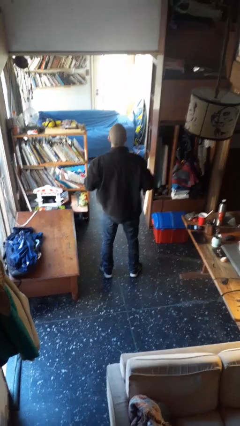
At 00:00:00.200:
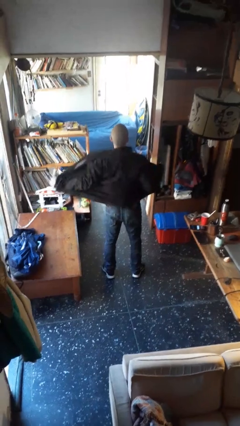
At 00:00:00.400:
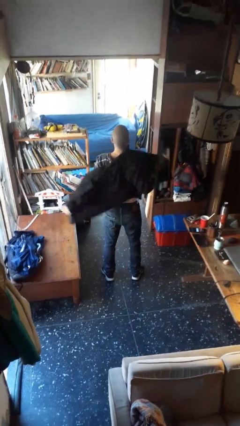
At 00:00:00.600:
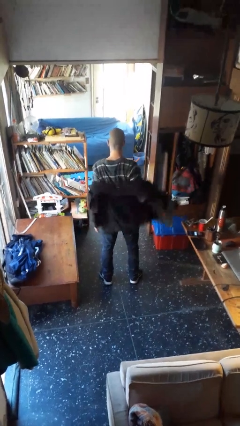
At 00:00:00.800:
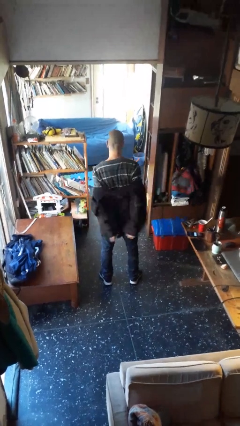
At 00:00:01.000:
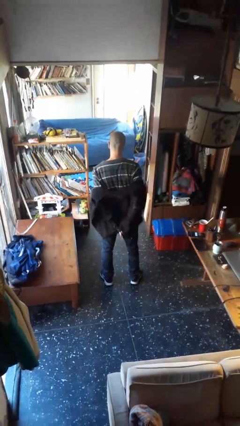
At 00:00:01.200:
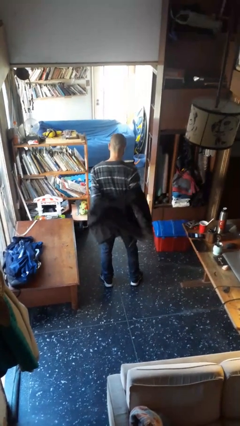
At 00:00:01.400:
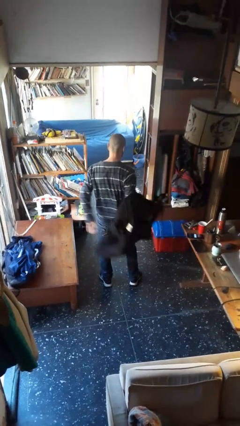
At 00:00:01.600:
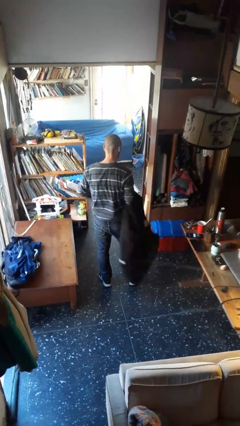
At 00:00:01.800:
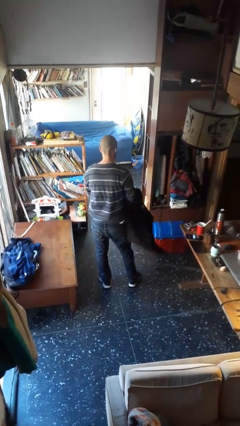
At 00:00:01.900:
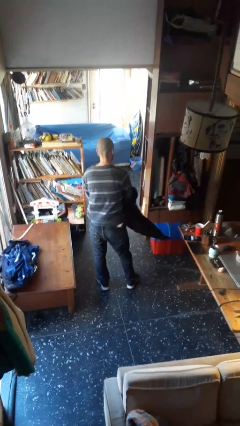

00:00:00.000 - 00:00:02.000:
person takes off jacket

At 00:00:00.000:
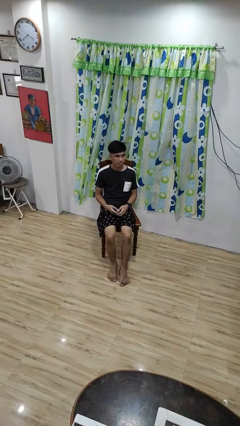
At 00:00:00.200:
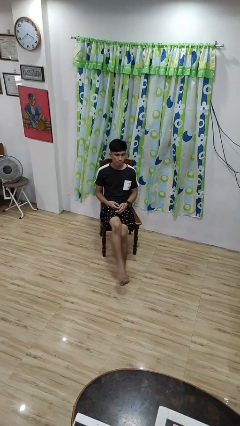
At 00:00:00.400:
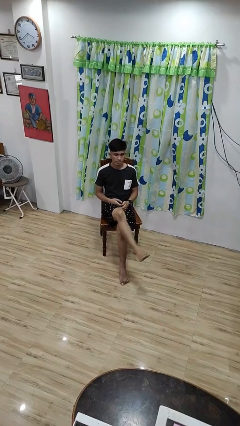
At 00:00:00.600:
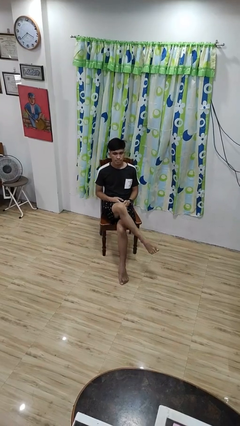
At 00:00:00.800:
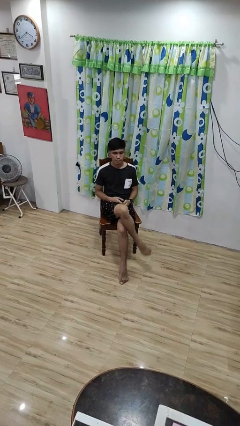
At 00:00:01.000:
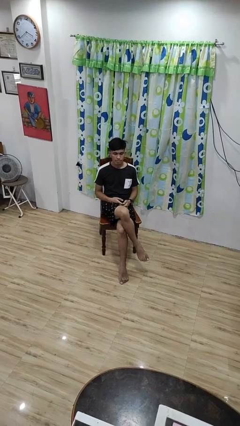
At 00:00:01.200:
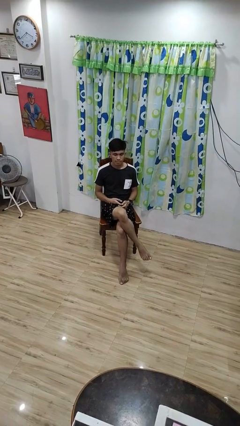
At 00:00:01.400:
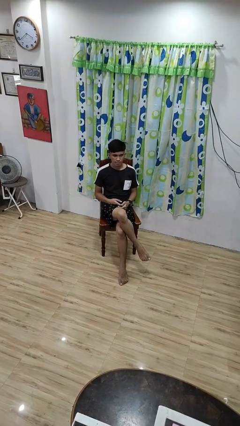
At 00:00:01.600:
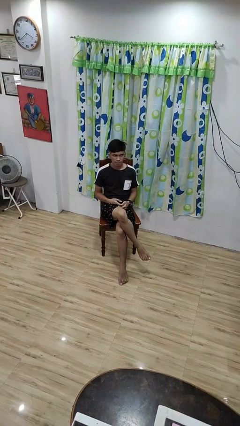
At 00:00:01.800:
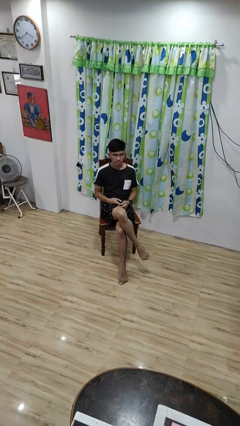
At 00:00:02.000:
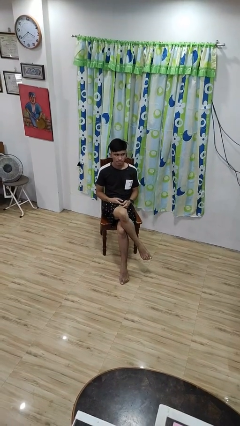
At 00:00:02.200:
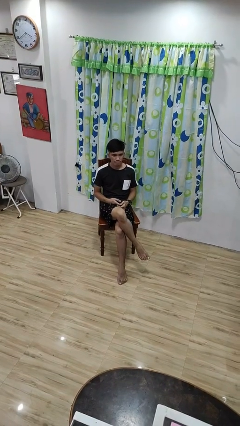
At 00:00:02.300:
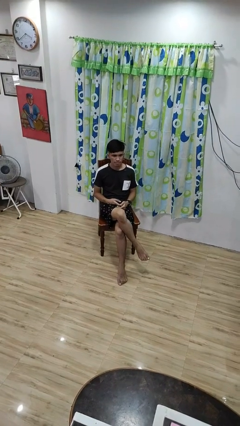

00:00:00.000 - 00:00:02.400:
person crosses legs

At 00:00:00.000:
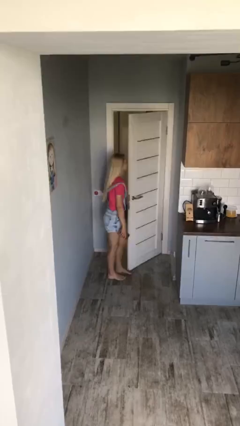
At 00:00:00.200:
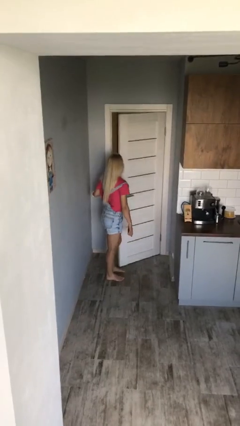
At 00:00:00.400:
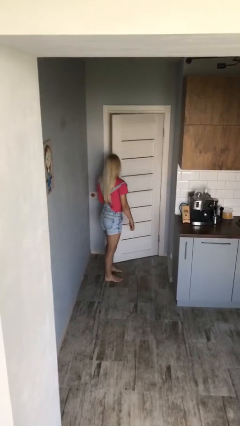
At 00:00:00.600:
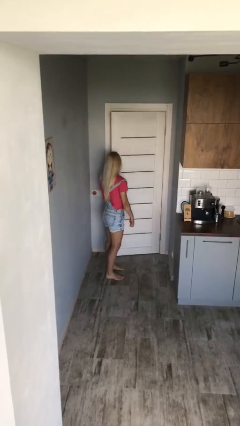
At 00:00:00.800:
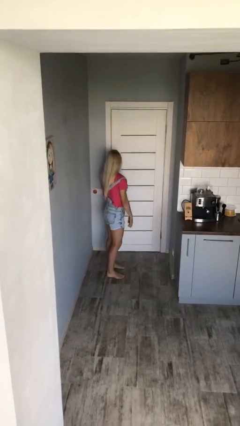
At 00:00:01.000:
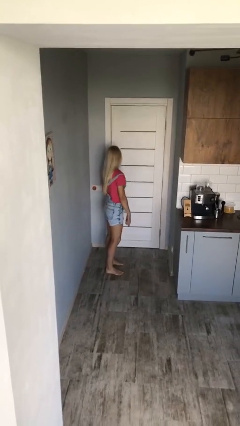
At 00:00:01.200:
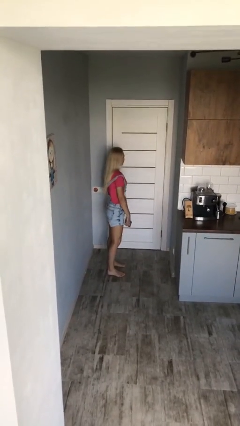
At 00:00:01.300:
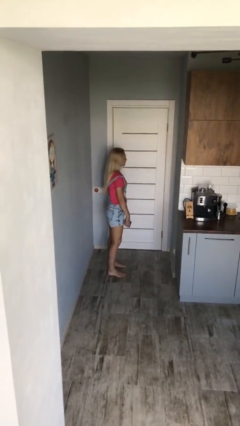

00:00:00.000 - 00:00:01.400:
person closes facility door

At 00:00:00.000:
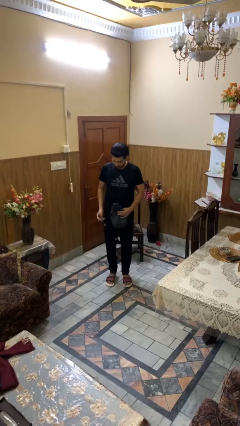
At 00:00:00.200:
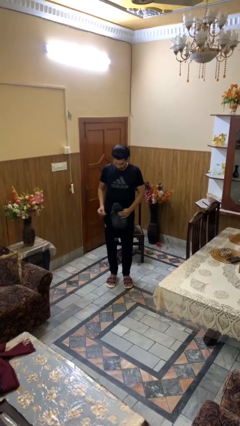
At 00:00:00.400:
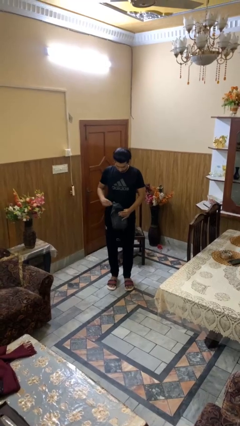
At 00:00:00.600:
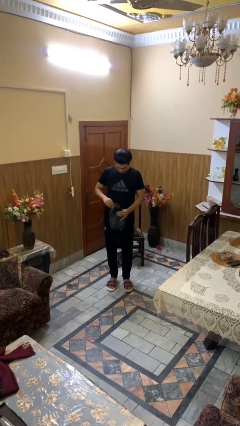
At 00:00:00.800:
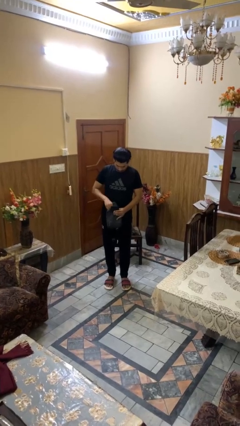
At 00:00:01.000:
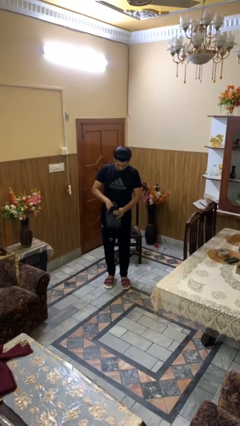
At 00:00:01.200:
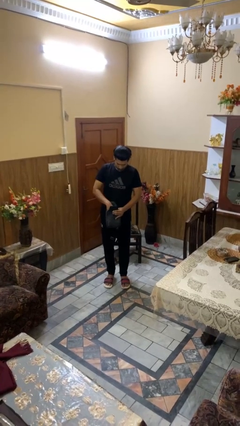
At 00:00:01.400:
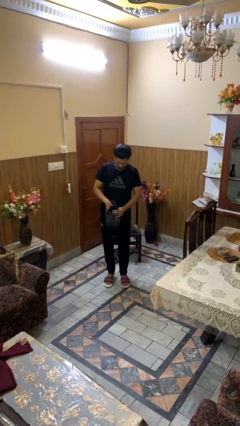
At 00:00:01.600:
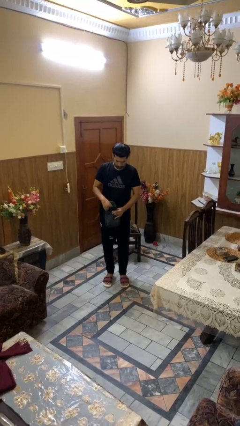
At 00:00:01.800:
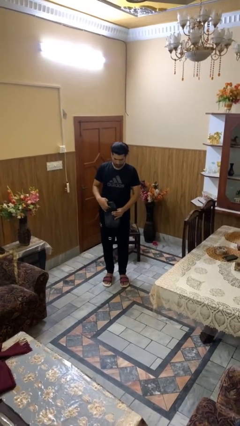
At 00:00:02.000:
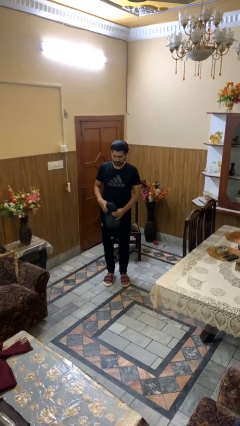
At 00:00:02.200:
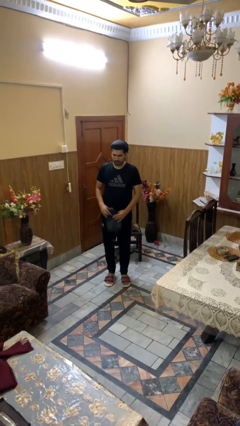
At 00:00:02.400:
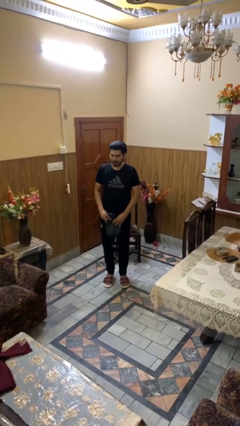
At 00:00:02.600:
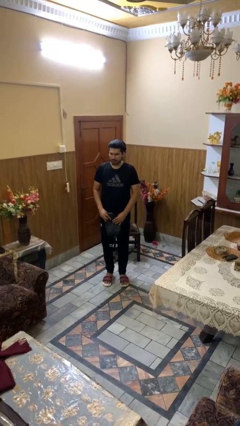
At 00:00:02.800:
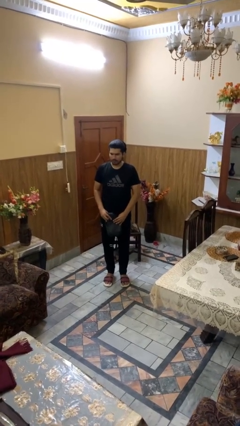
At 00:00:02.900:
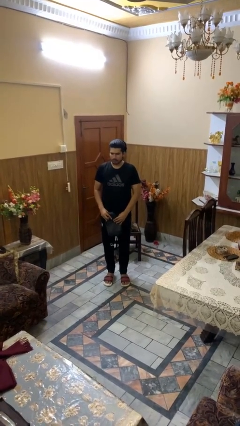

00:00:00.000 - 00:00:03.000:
person puts object into purse

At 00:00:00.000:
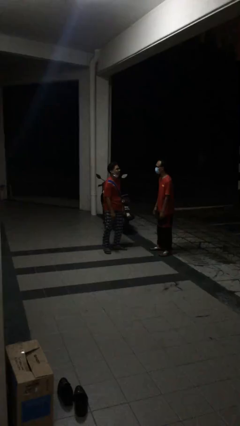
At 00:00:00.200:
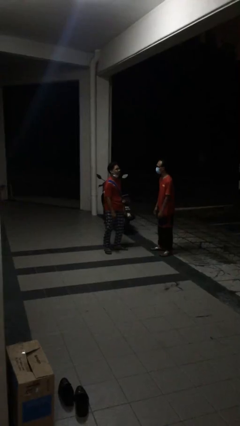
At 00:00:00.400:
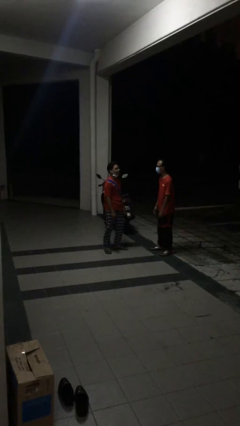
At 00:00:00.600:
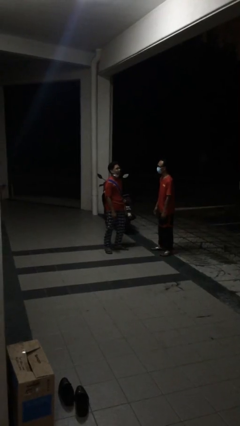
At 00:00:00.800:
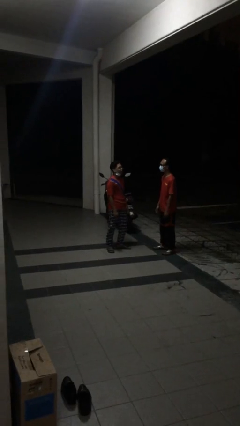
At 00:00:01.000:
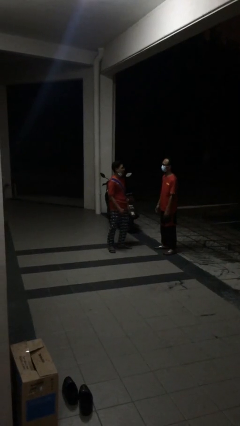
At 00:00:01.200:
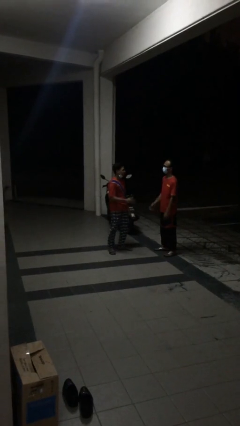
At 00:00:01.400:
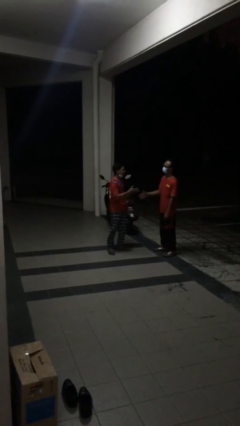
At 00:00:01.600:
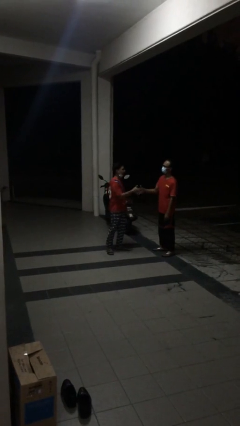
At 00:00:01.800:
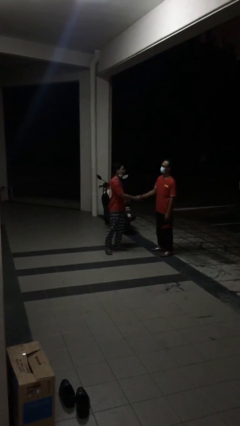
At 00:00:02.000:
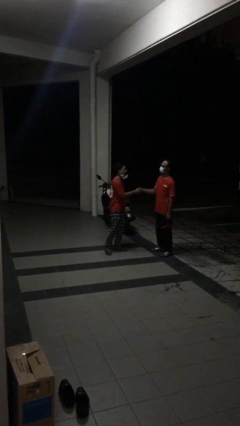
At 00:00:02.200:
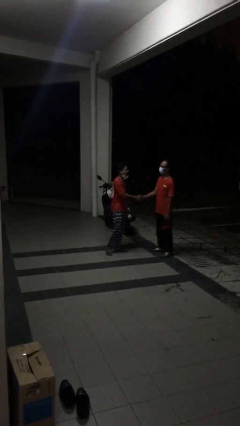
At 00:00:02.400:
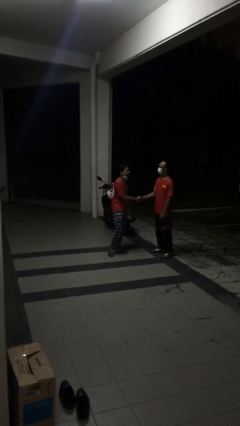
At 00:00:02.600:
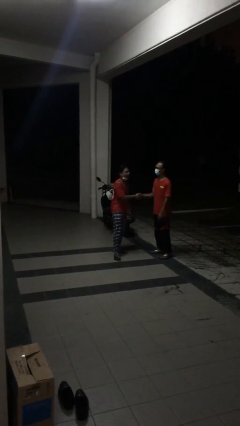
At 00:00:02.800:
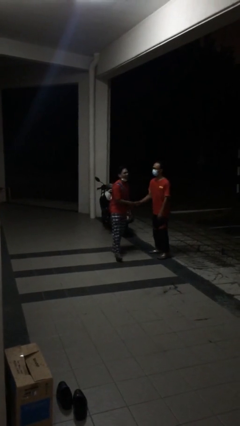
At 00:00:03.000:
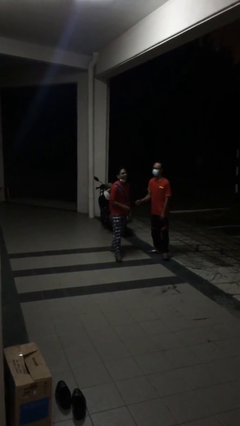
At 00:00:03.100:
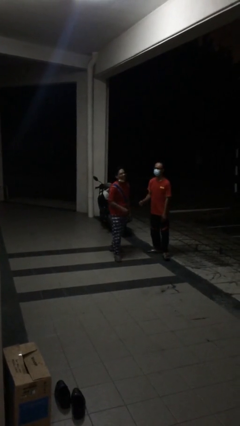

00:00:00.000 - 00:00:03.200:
person shakes hand

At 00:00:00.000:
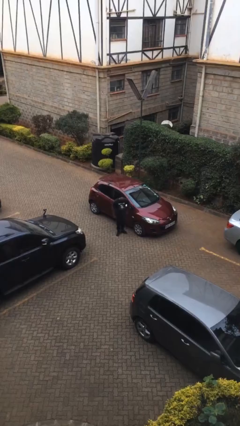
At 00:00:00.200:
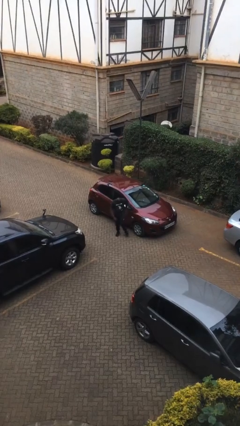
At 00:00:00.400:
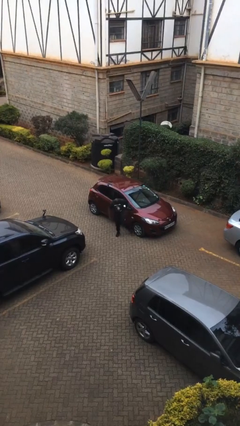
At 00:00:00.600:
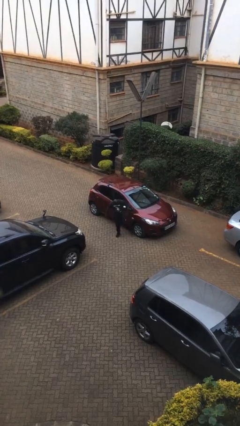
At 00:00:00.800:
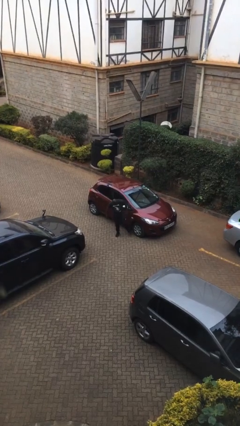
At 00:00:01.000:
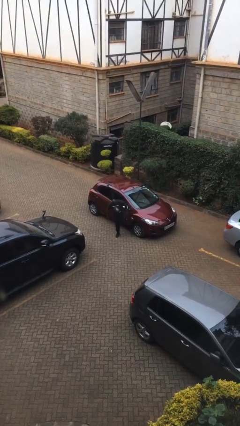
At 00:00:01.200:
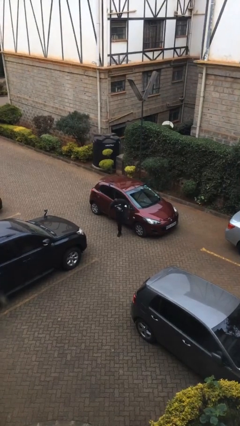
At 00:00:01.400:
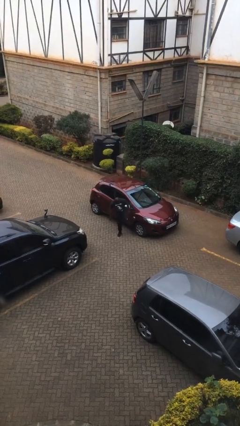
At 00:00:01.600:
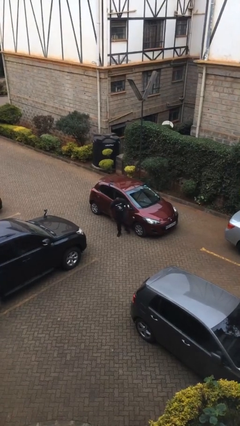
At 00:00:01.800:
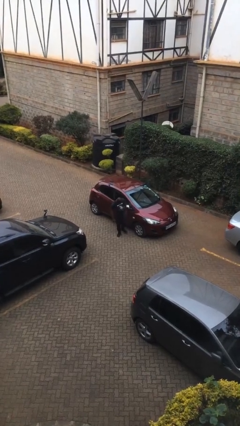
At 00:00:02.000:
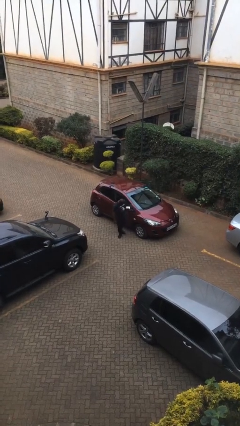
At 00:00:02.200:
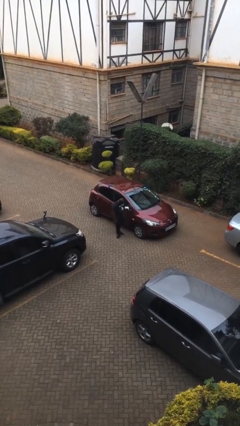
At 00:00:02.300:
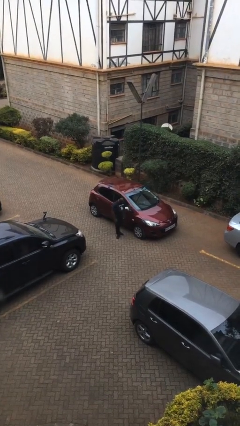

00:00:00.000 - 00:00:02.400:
person kicks car tires

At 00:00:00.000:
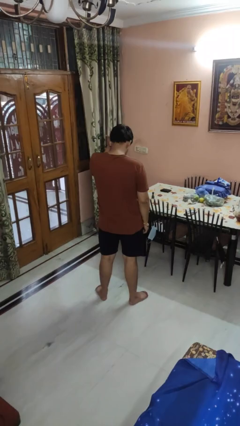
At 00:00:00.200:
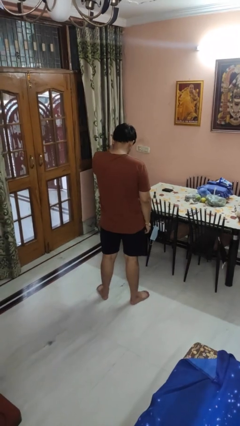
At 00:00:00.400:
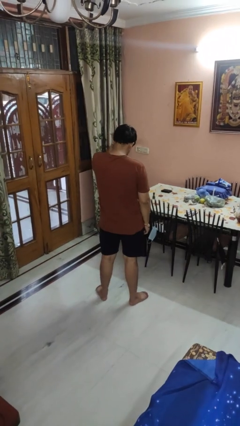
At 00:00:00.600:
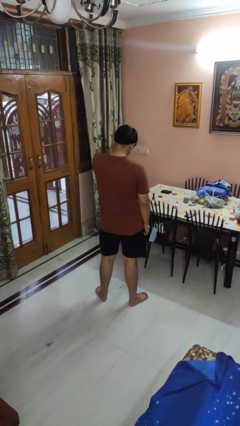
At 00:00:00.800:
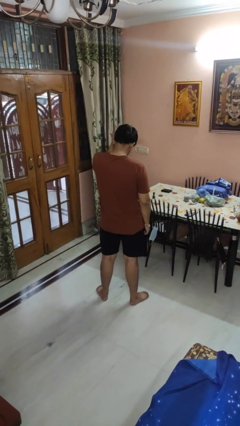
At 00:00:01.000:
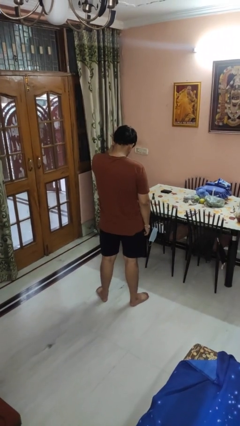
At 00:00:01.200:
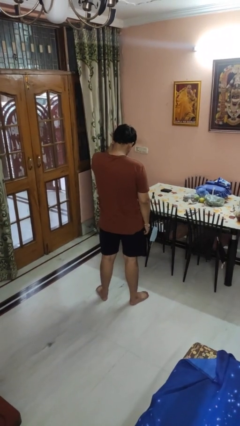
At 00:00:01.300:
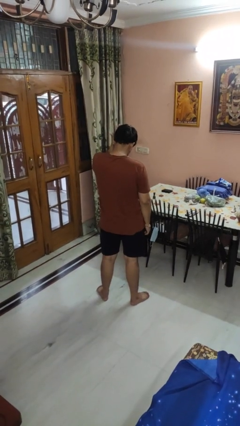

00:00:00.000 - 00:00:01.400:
person pats head

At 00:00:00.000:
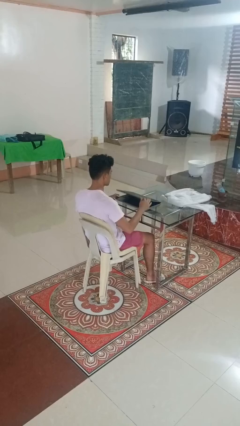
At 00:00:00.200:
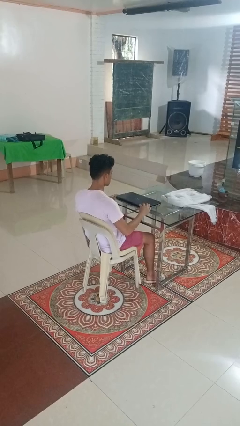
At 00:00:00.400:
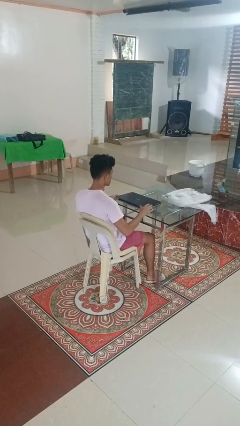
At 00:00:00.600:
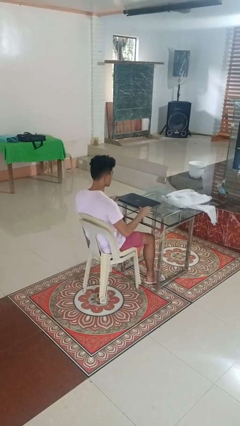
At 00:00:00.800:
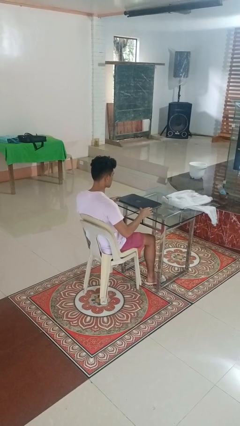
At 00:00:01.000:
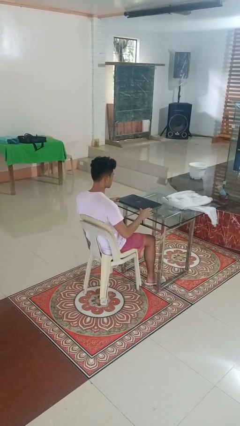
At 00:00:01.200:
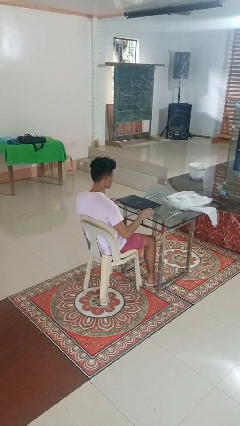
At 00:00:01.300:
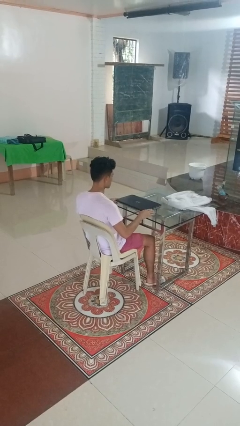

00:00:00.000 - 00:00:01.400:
person closes laptop
